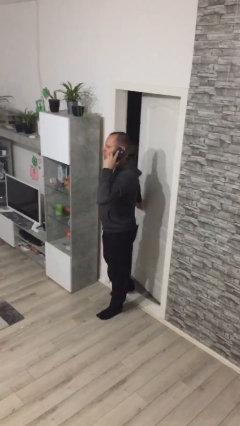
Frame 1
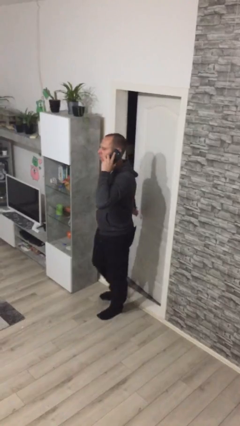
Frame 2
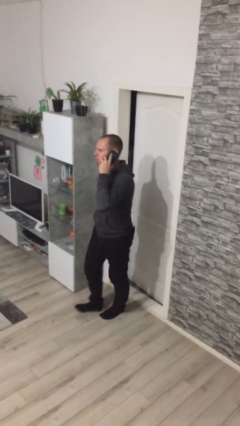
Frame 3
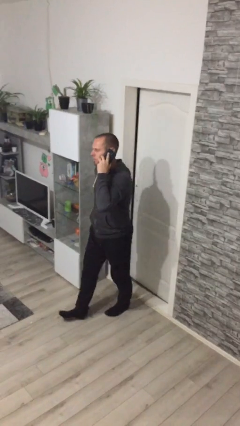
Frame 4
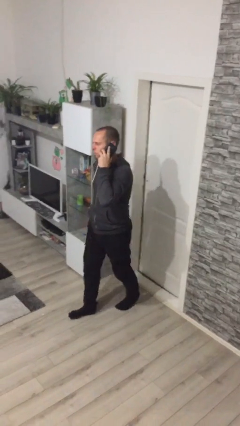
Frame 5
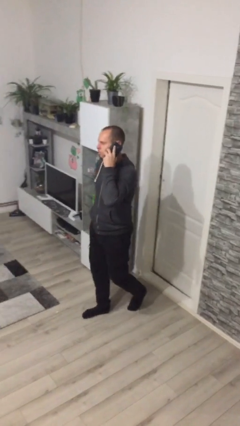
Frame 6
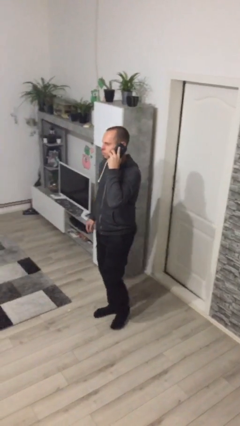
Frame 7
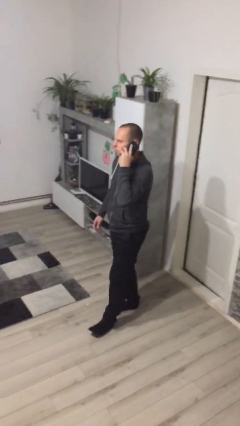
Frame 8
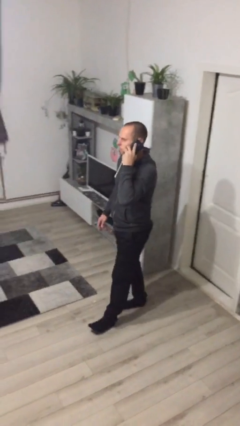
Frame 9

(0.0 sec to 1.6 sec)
person closes facility door

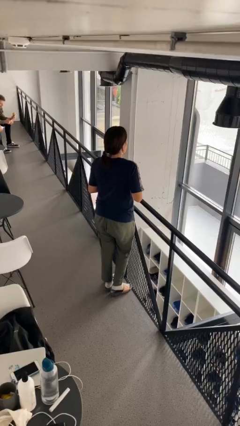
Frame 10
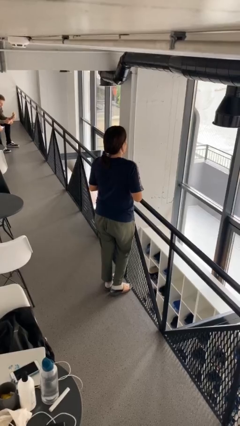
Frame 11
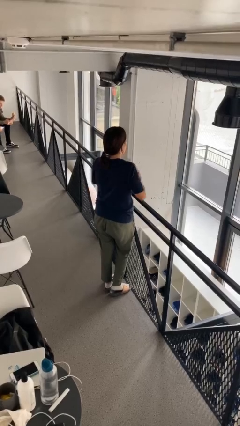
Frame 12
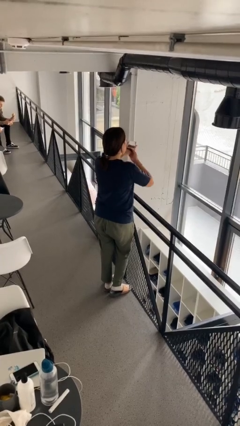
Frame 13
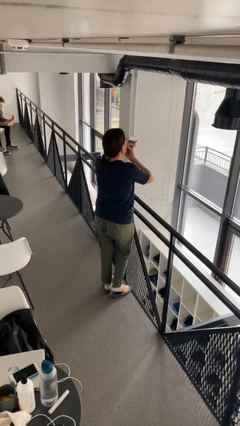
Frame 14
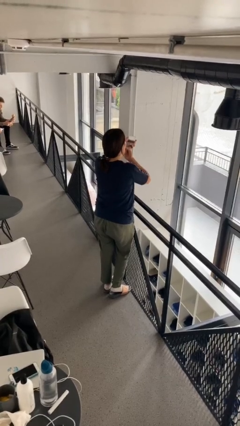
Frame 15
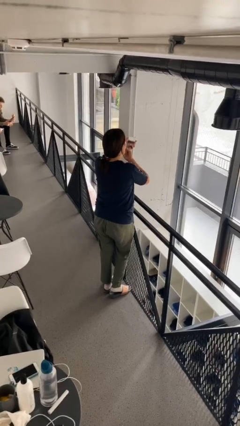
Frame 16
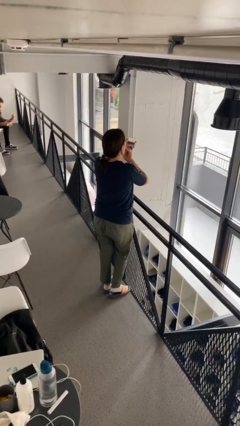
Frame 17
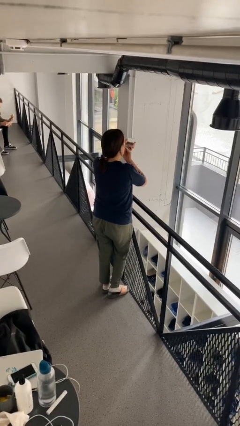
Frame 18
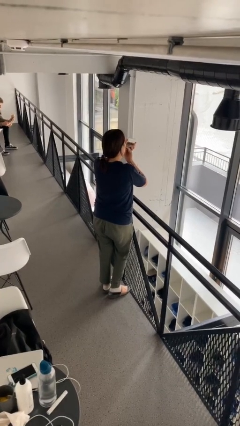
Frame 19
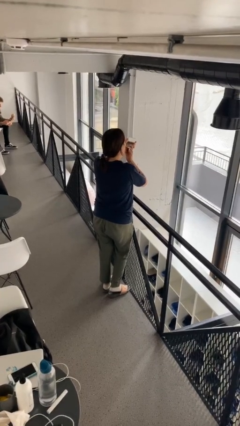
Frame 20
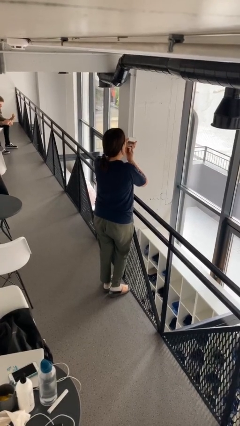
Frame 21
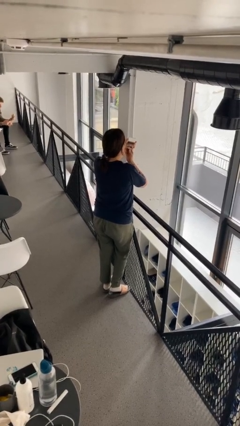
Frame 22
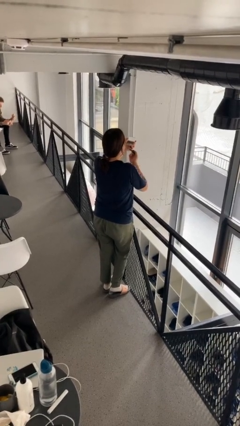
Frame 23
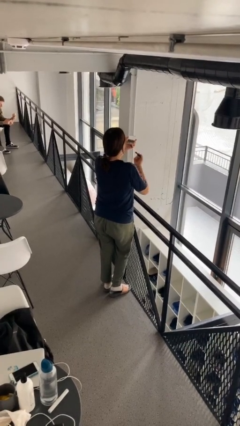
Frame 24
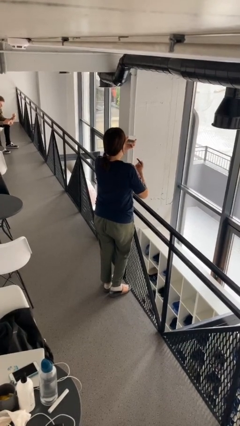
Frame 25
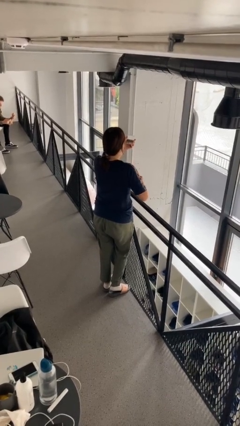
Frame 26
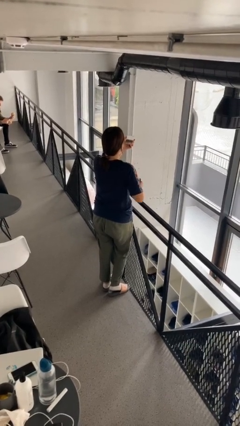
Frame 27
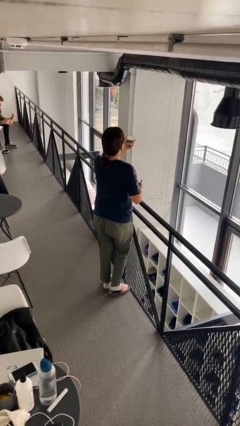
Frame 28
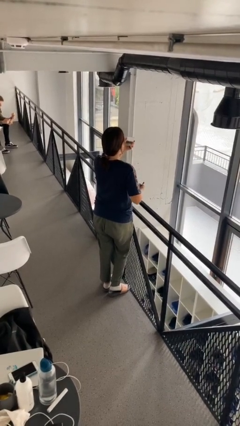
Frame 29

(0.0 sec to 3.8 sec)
person applies lip makeup

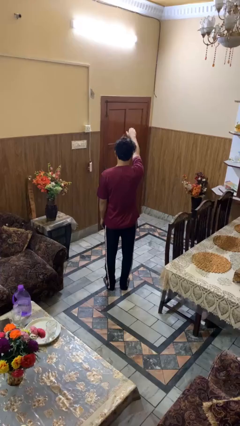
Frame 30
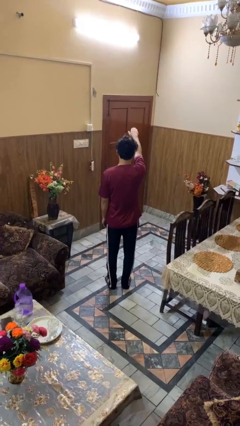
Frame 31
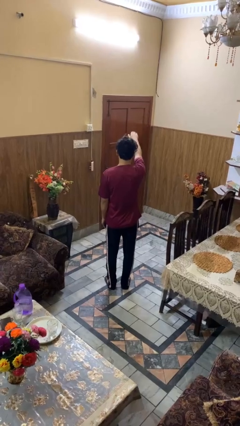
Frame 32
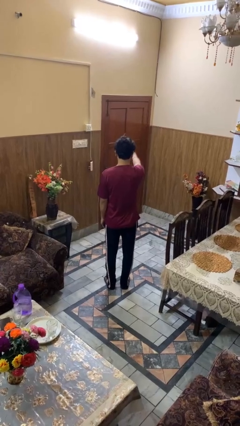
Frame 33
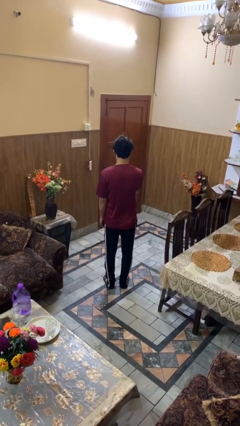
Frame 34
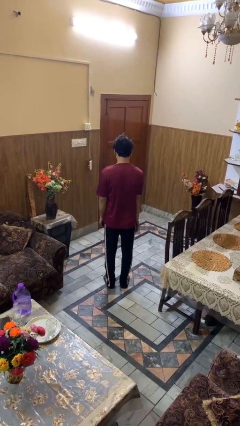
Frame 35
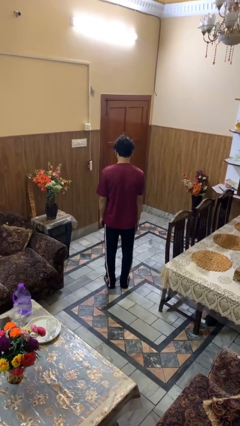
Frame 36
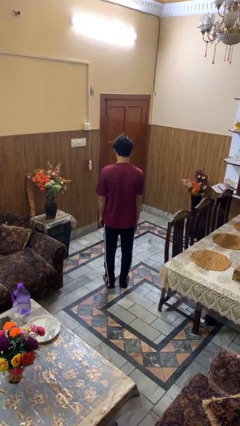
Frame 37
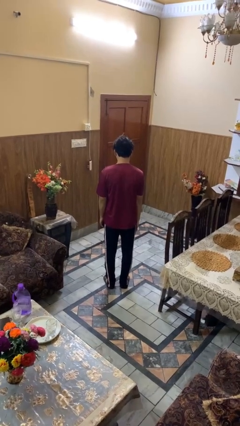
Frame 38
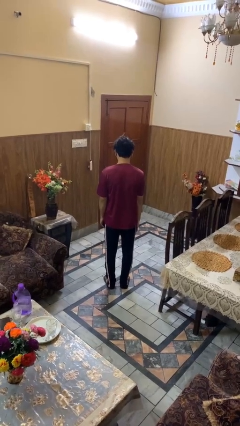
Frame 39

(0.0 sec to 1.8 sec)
person gestures swipe down

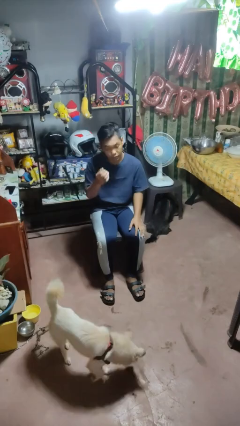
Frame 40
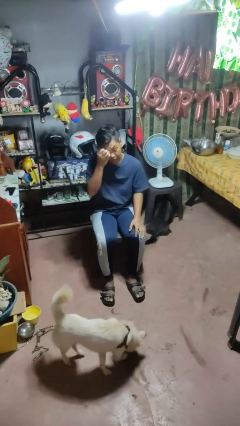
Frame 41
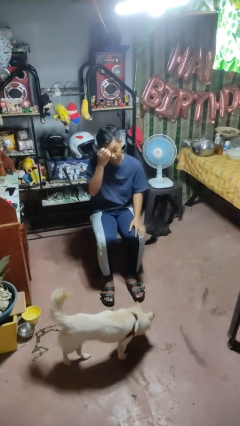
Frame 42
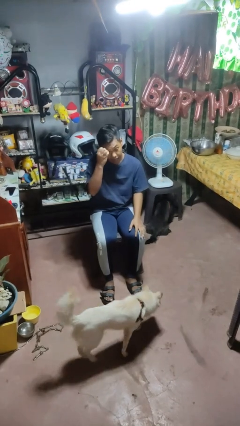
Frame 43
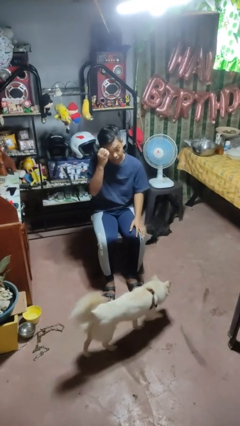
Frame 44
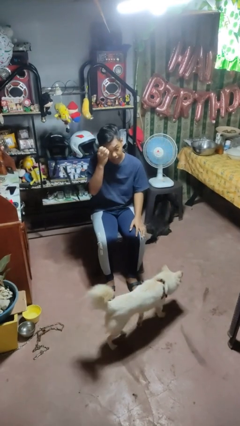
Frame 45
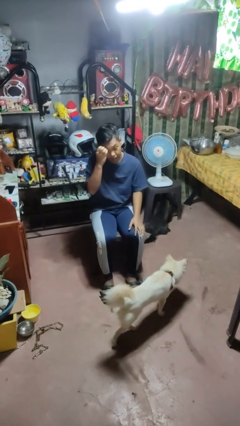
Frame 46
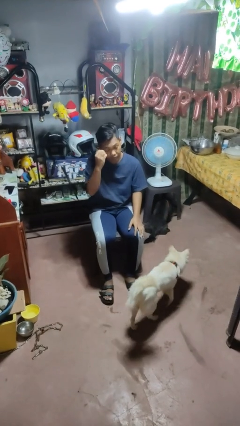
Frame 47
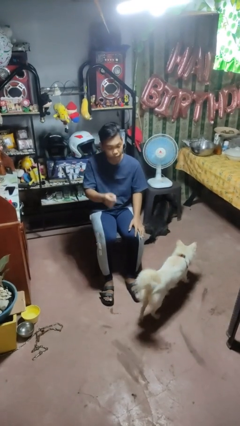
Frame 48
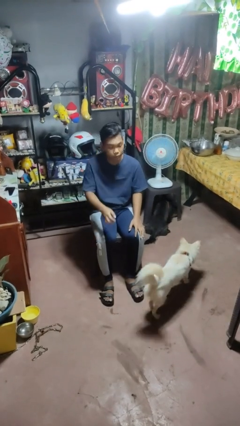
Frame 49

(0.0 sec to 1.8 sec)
person scratches face

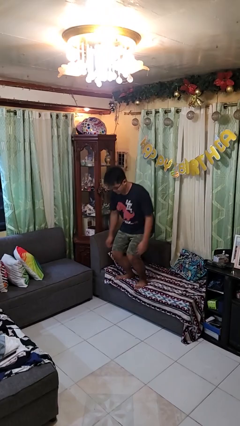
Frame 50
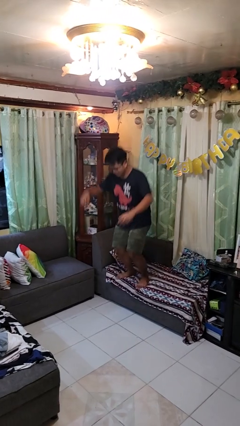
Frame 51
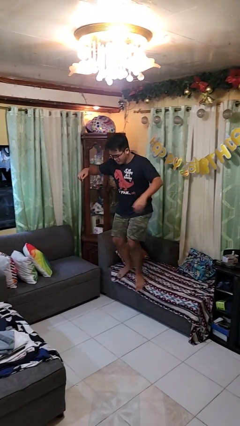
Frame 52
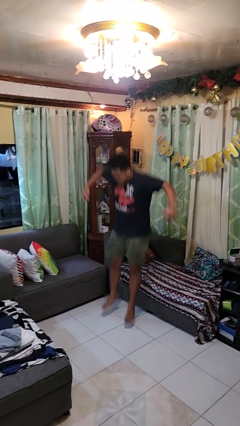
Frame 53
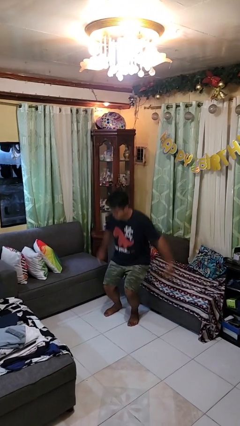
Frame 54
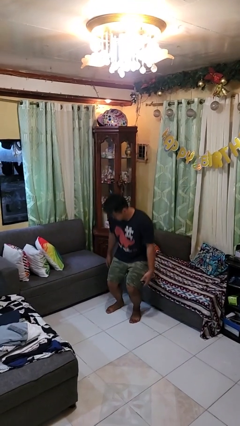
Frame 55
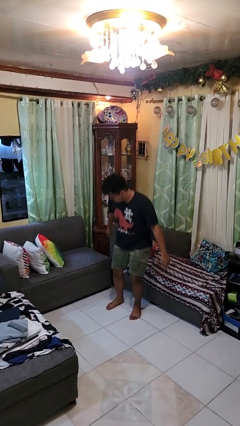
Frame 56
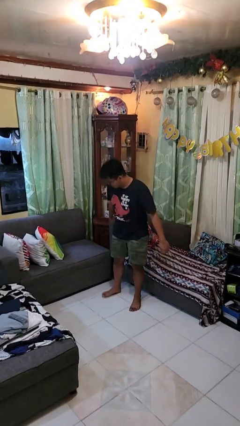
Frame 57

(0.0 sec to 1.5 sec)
person jumps on couch

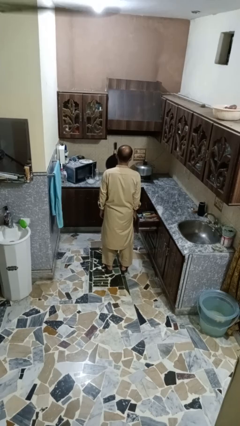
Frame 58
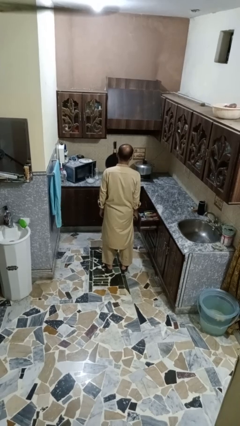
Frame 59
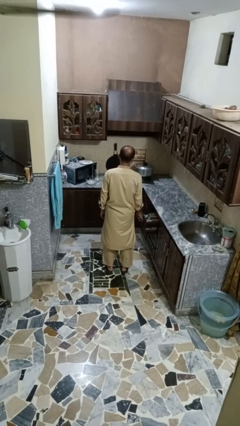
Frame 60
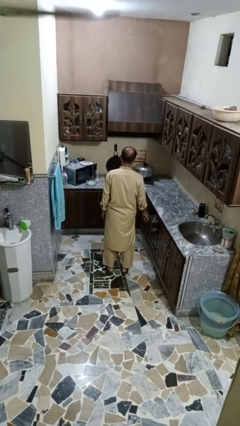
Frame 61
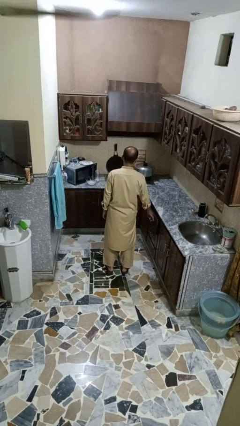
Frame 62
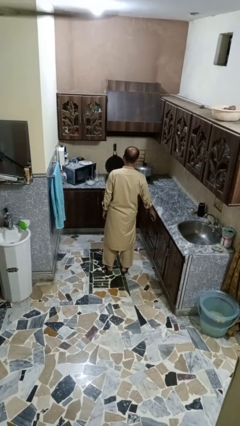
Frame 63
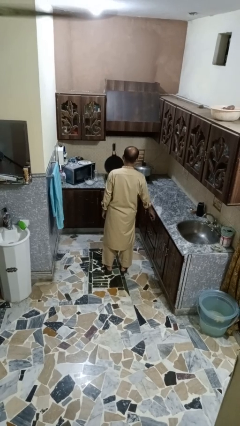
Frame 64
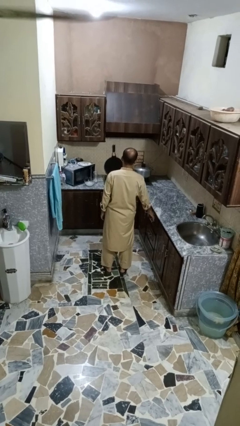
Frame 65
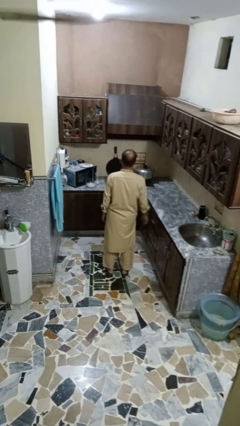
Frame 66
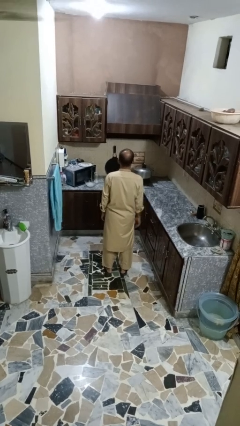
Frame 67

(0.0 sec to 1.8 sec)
person closes kitchen drawer

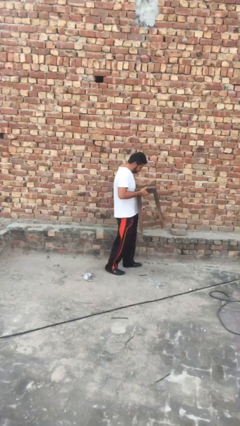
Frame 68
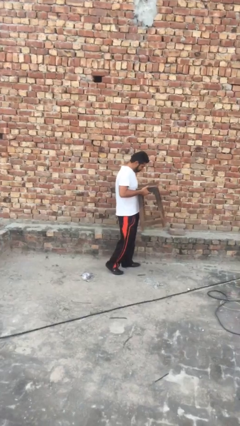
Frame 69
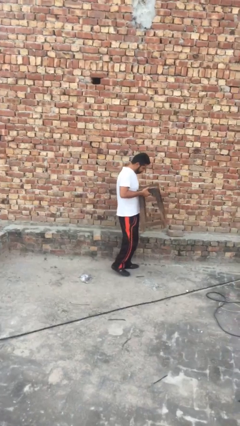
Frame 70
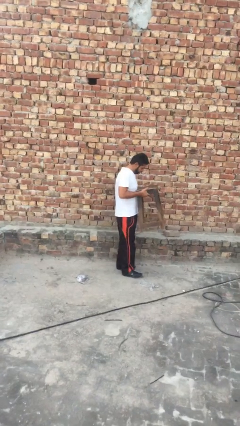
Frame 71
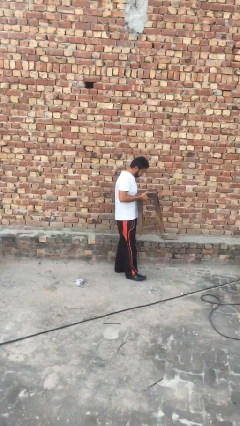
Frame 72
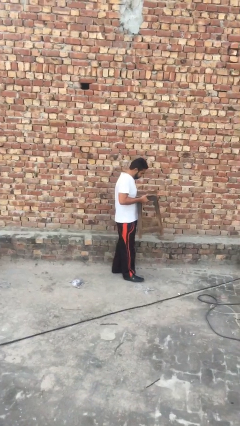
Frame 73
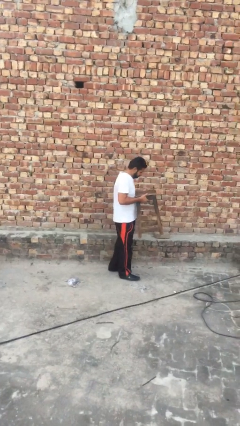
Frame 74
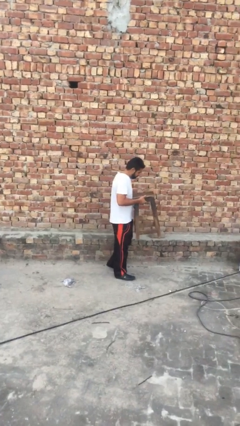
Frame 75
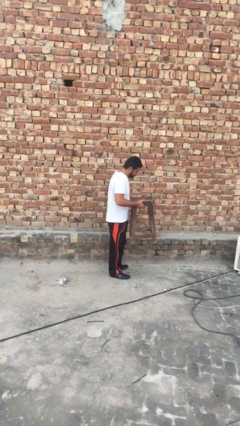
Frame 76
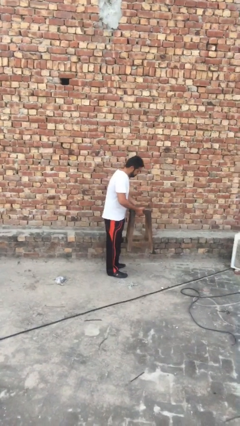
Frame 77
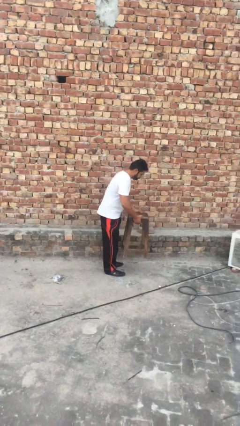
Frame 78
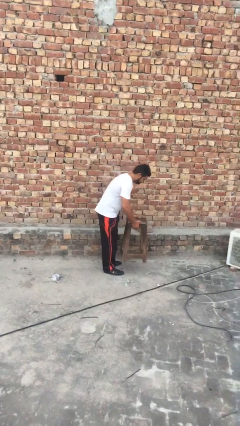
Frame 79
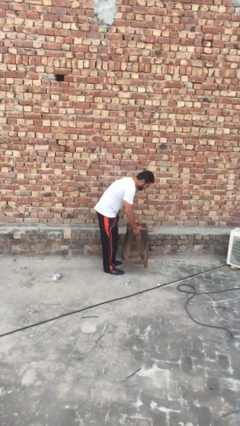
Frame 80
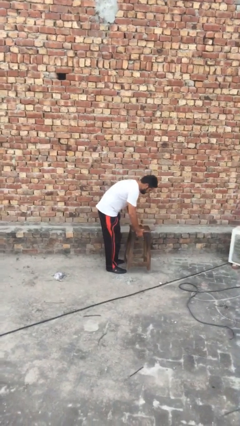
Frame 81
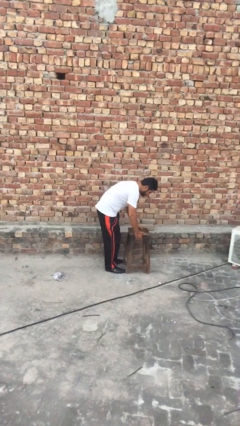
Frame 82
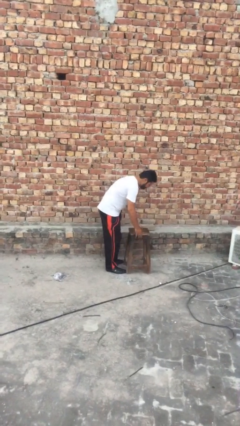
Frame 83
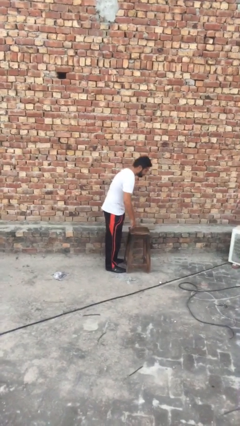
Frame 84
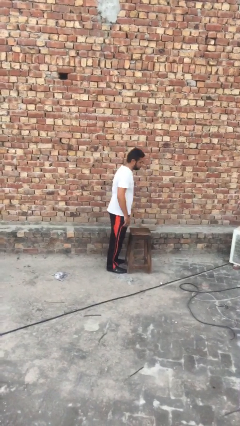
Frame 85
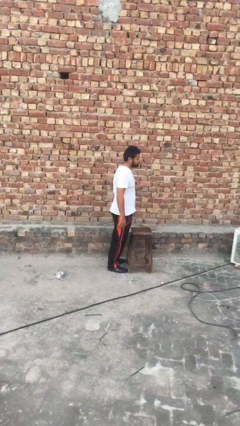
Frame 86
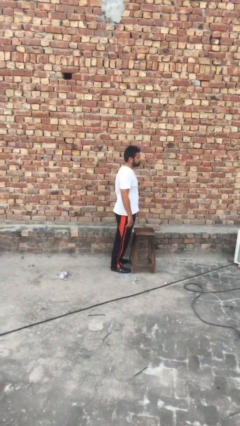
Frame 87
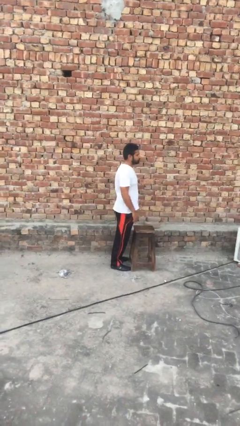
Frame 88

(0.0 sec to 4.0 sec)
person puts down object on floor
